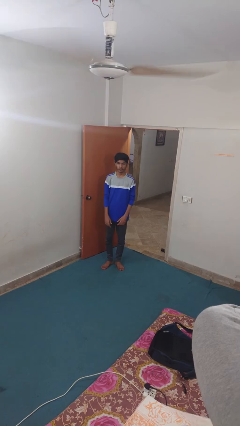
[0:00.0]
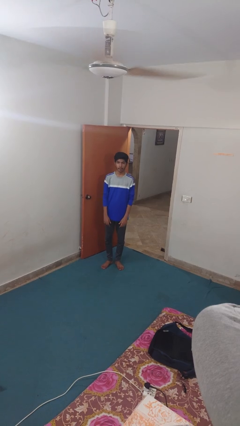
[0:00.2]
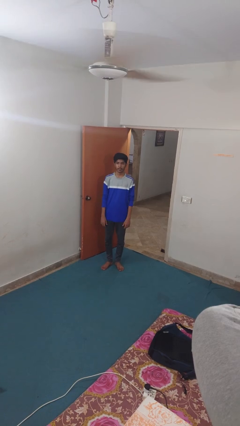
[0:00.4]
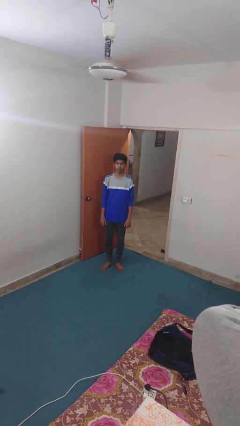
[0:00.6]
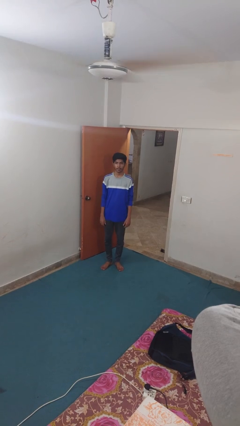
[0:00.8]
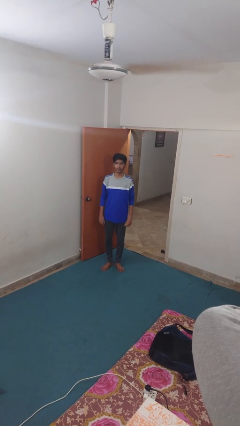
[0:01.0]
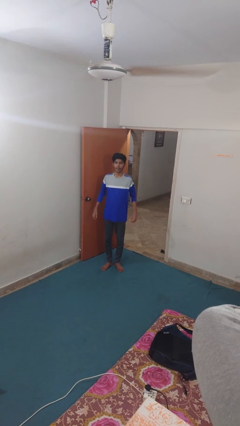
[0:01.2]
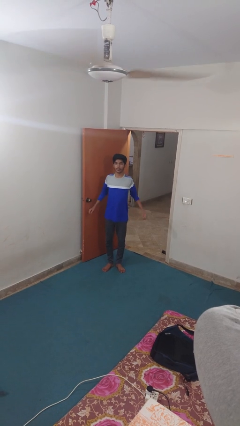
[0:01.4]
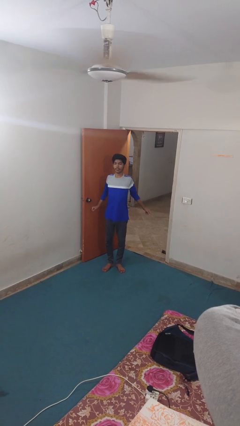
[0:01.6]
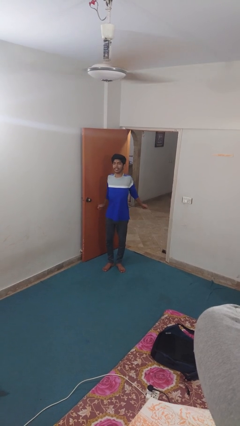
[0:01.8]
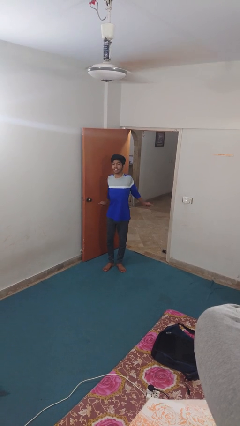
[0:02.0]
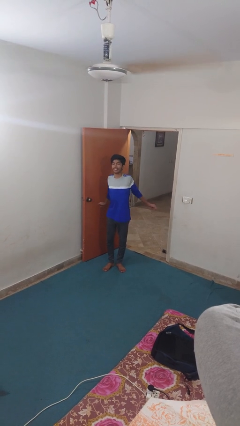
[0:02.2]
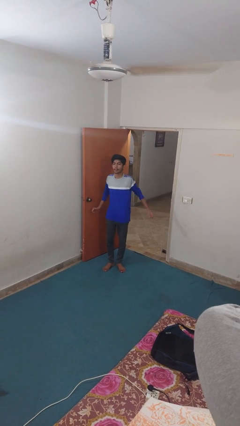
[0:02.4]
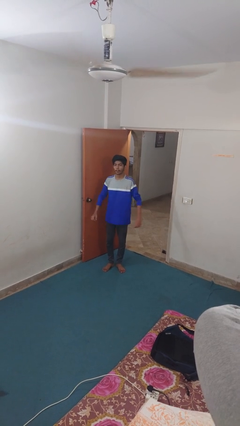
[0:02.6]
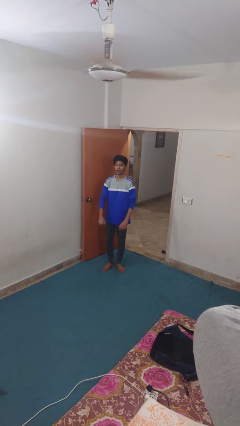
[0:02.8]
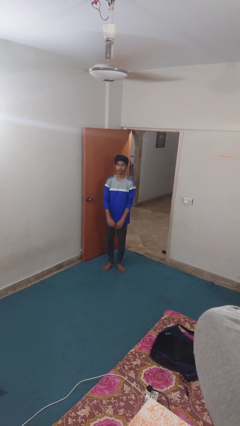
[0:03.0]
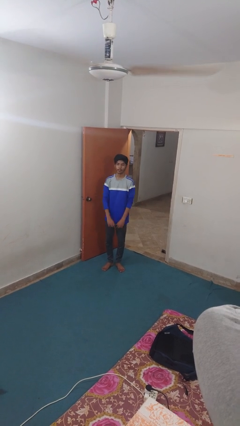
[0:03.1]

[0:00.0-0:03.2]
person stretches arms to side

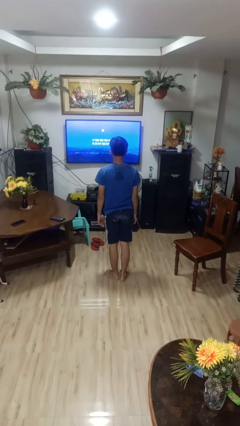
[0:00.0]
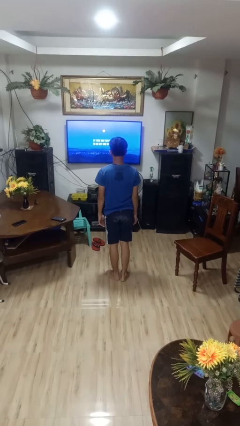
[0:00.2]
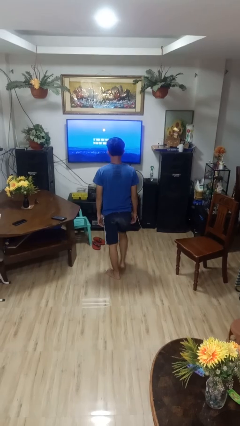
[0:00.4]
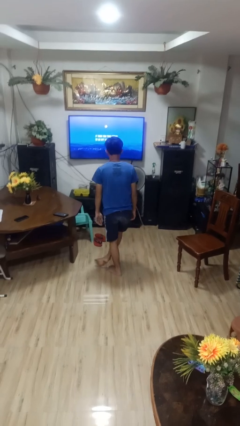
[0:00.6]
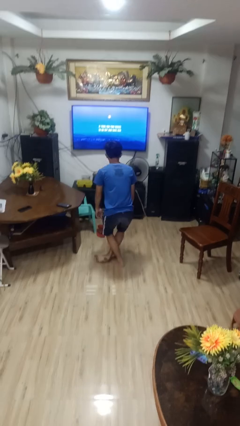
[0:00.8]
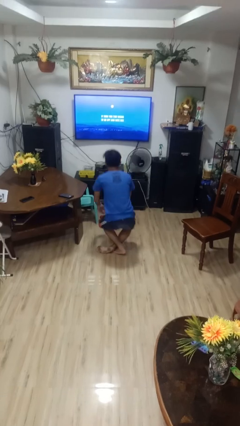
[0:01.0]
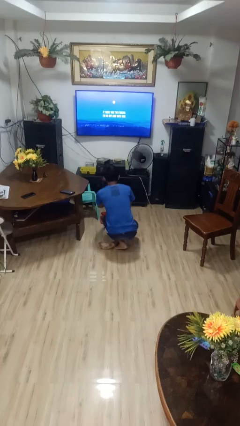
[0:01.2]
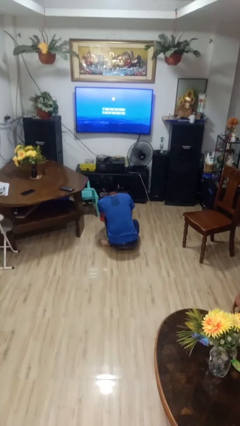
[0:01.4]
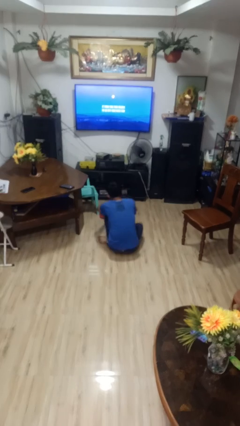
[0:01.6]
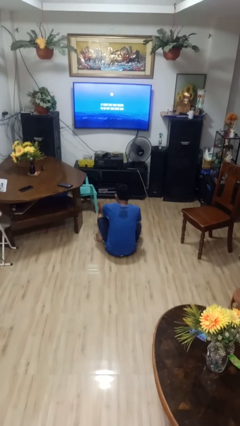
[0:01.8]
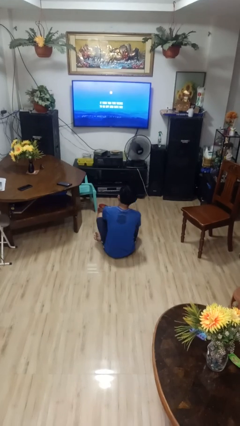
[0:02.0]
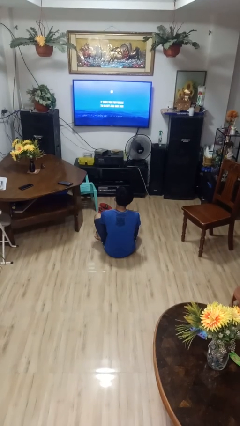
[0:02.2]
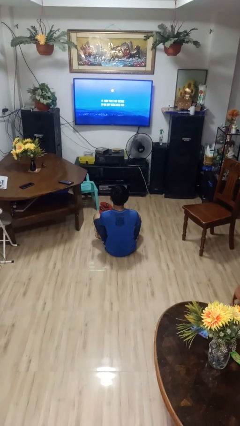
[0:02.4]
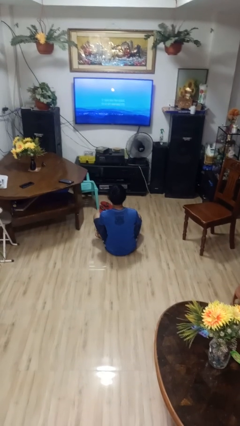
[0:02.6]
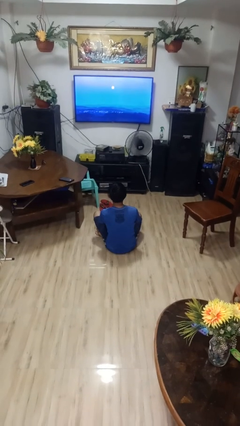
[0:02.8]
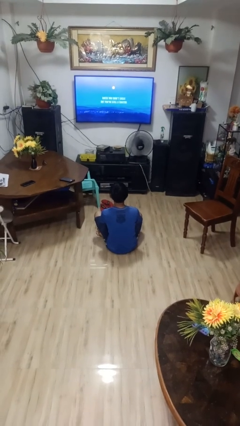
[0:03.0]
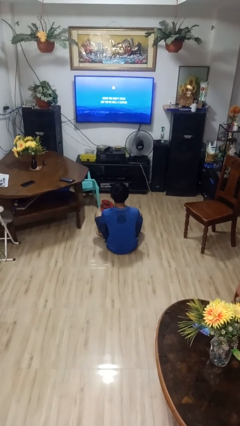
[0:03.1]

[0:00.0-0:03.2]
person sits crisscross

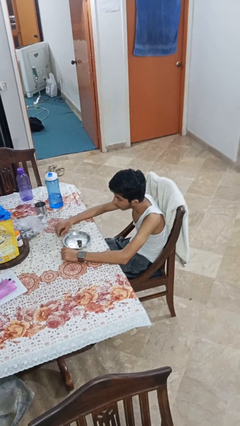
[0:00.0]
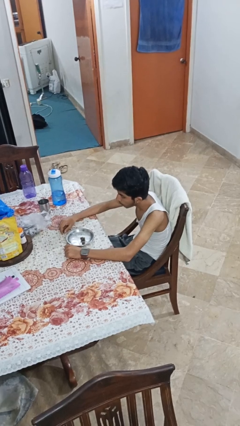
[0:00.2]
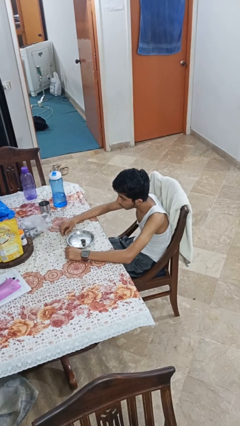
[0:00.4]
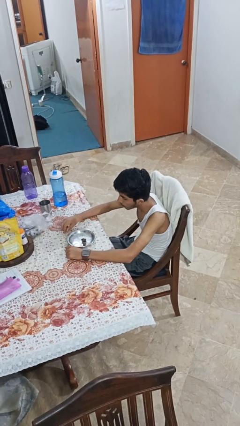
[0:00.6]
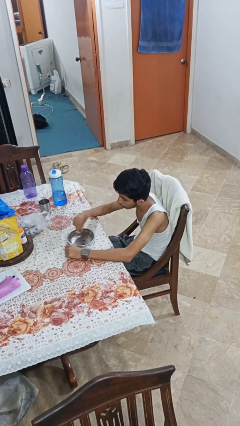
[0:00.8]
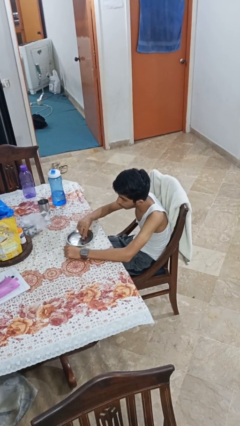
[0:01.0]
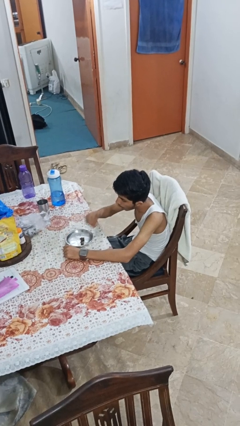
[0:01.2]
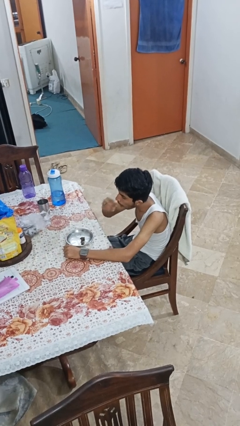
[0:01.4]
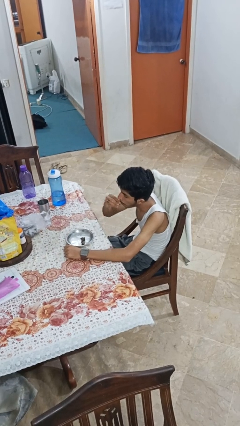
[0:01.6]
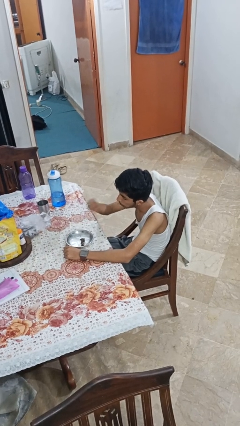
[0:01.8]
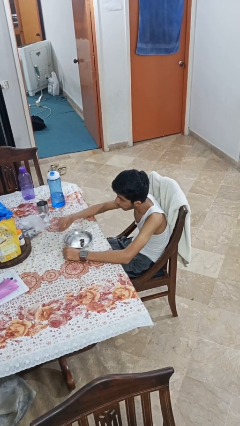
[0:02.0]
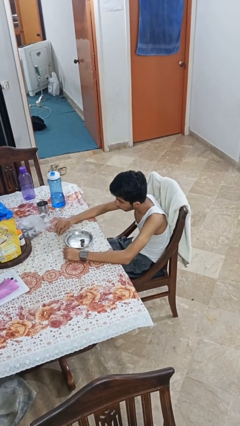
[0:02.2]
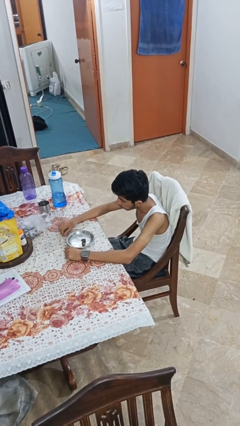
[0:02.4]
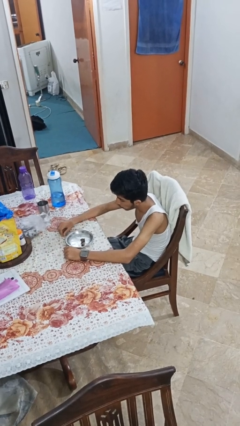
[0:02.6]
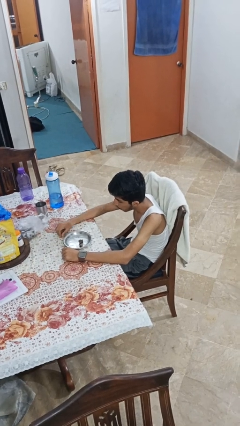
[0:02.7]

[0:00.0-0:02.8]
person eats with hands

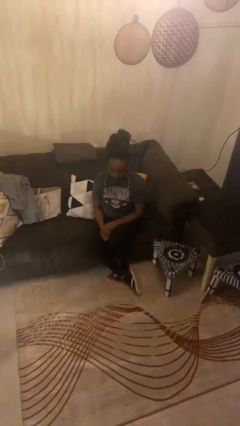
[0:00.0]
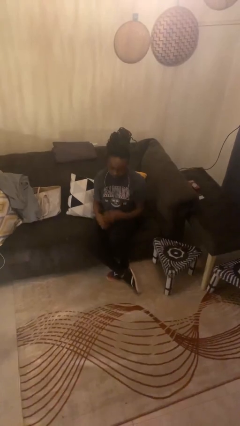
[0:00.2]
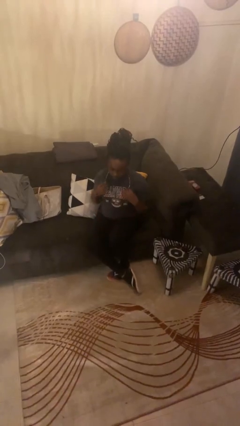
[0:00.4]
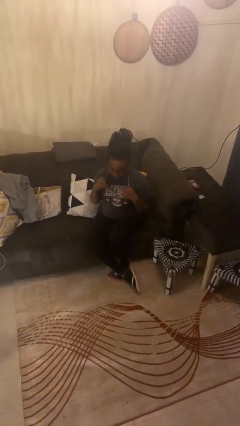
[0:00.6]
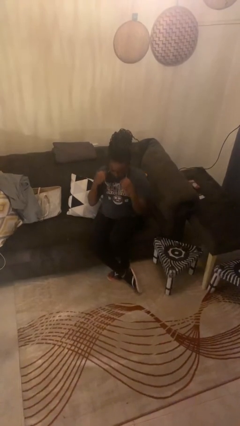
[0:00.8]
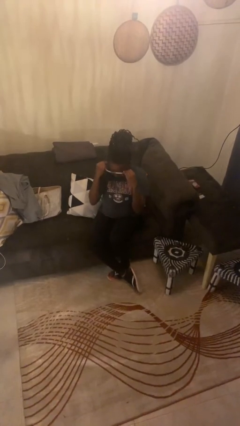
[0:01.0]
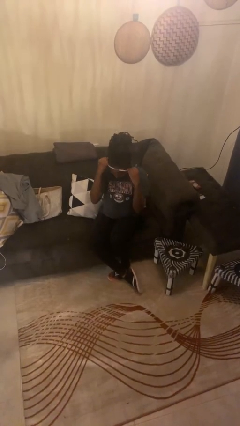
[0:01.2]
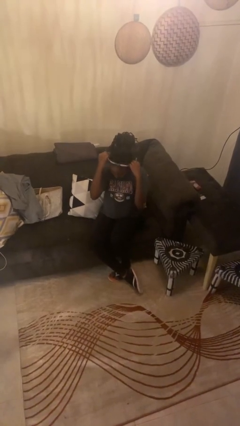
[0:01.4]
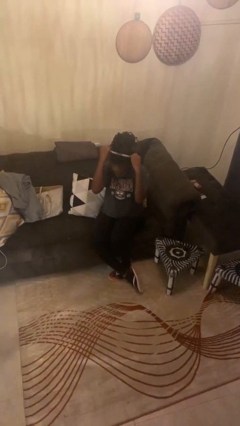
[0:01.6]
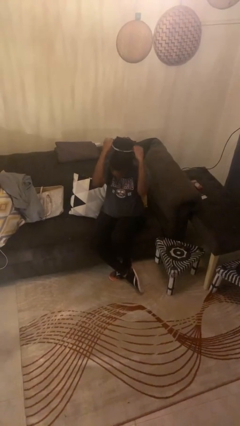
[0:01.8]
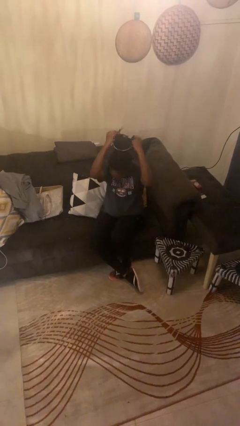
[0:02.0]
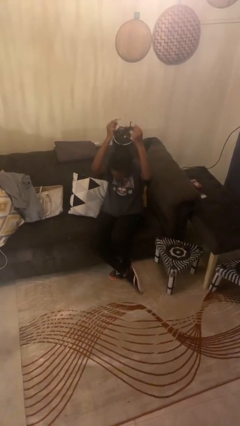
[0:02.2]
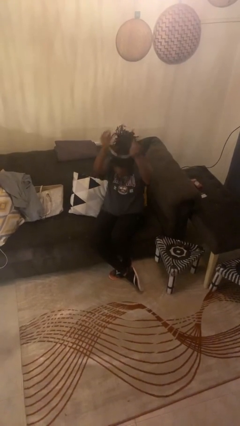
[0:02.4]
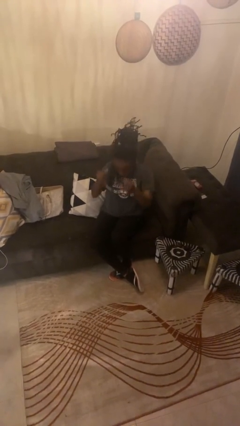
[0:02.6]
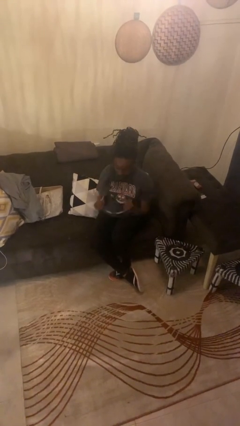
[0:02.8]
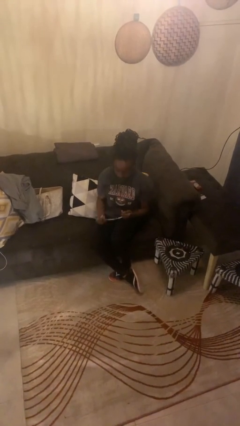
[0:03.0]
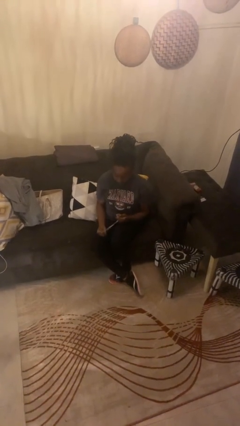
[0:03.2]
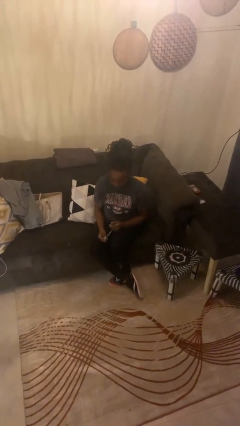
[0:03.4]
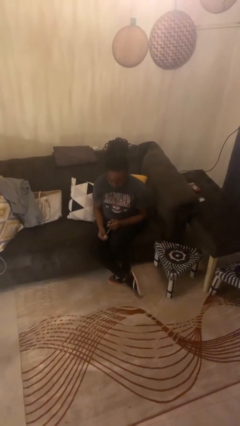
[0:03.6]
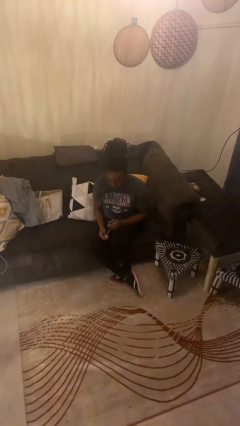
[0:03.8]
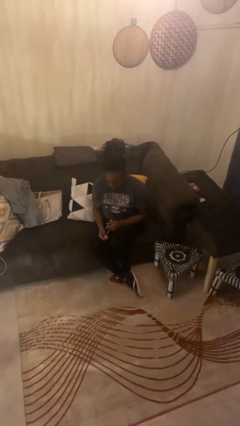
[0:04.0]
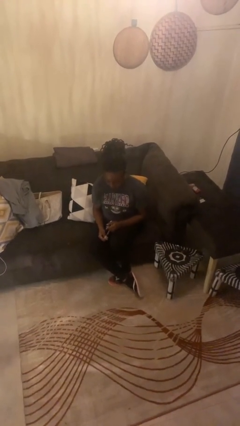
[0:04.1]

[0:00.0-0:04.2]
person takes off necklace

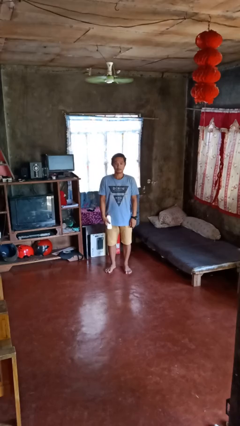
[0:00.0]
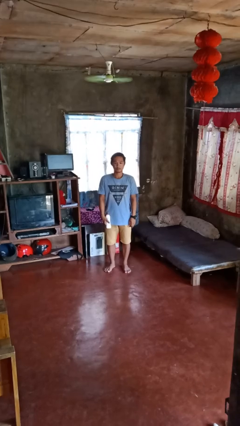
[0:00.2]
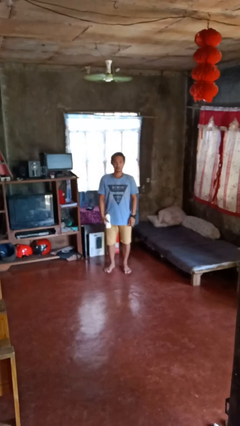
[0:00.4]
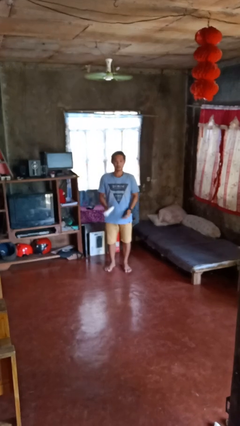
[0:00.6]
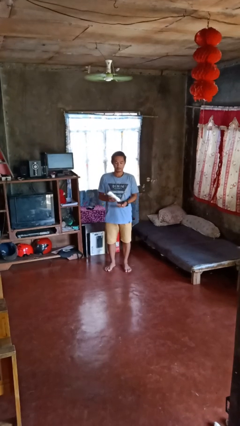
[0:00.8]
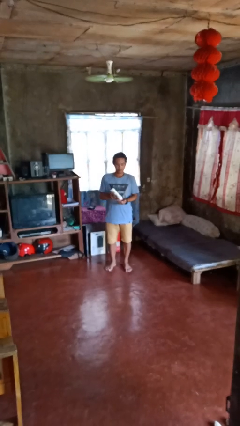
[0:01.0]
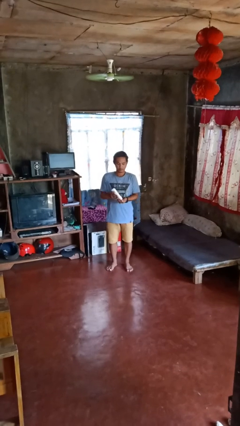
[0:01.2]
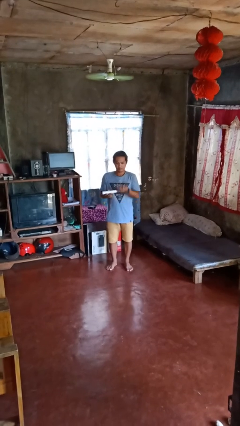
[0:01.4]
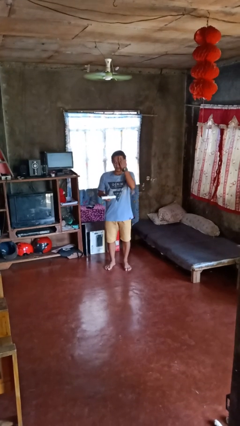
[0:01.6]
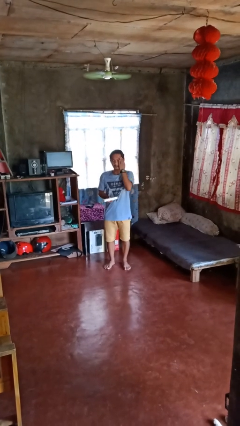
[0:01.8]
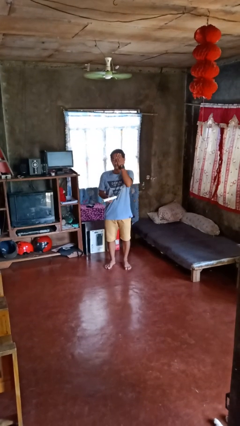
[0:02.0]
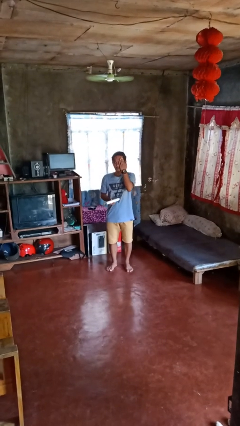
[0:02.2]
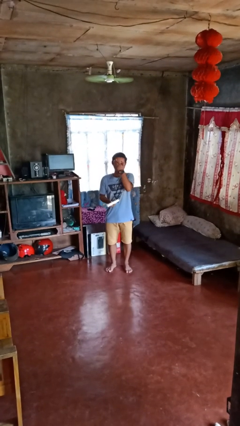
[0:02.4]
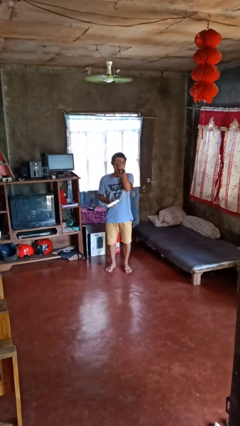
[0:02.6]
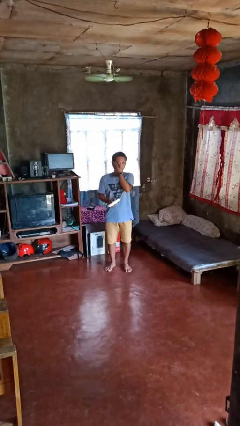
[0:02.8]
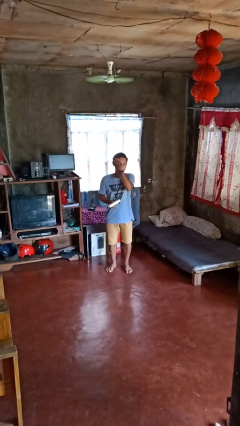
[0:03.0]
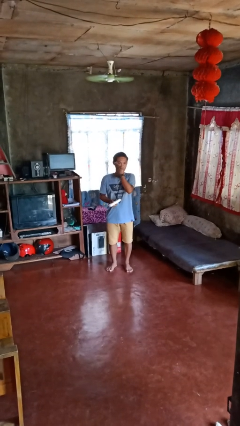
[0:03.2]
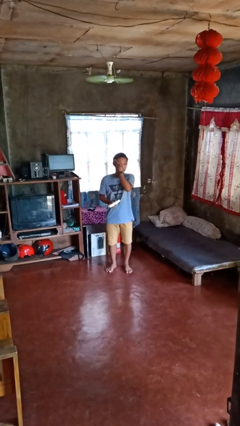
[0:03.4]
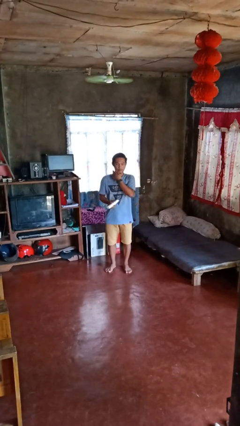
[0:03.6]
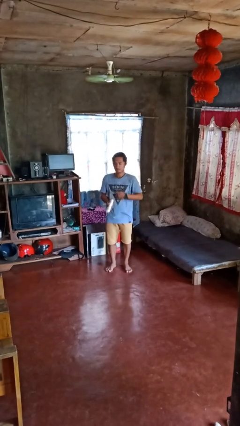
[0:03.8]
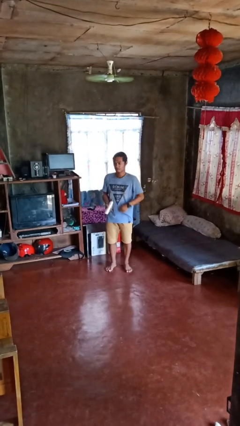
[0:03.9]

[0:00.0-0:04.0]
person applies facial moisturizer
